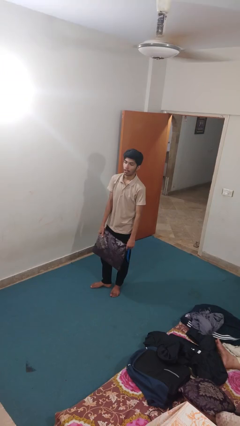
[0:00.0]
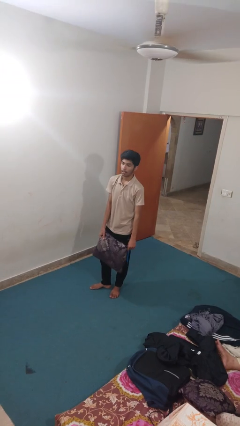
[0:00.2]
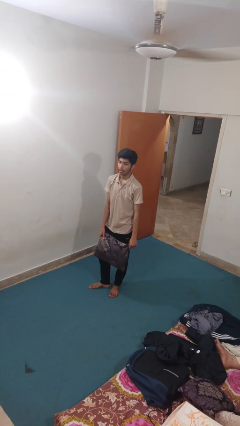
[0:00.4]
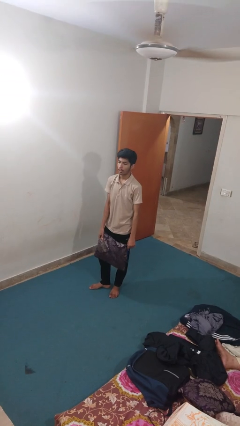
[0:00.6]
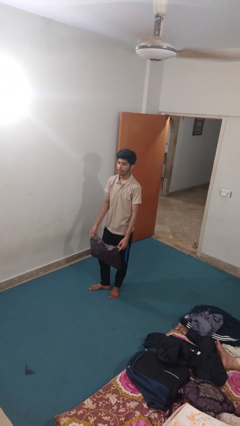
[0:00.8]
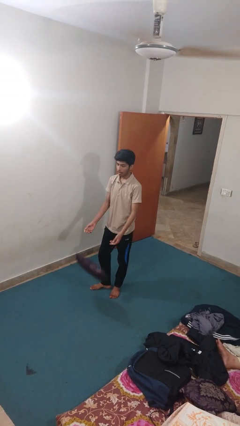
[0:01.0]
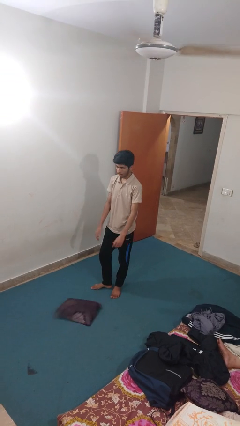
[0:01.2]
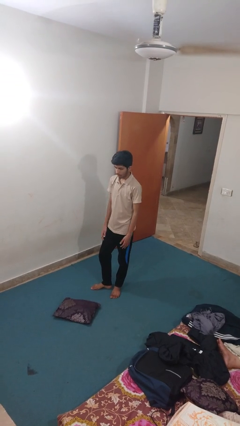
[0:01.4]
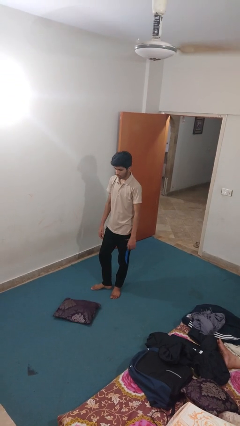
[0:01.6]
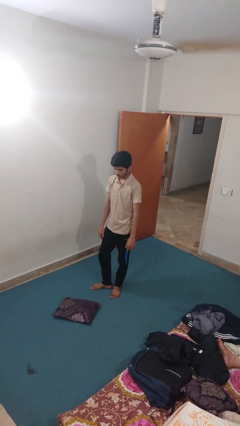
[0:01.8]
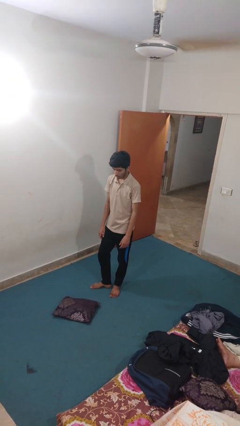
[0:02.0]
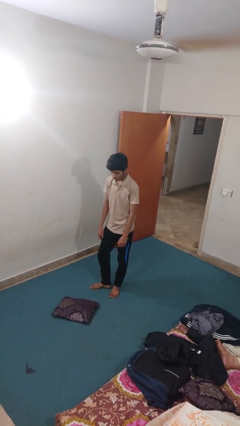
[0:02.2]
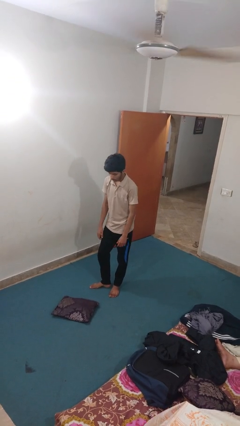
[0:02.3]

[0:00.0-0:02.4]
person drops object

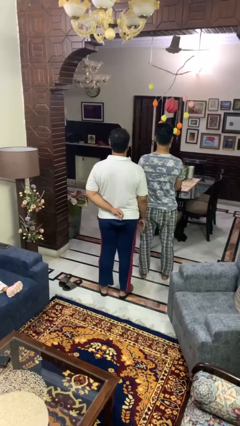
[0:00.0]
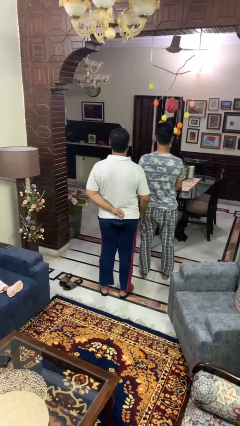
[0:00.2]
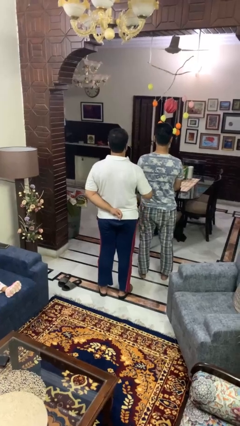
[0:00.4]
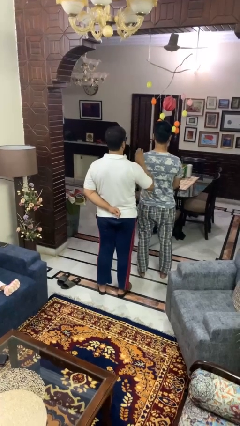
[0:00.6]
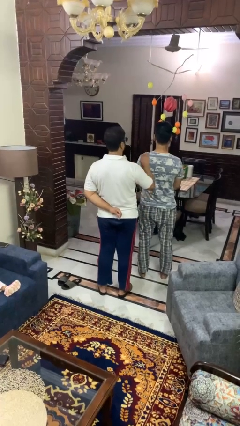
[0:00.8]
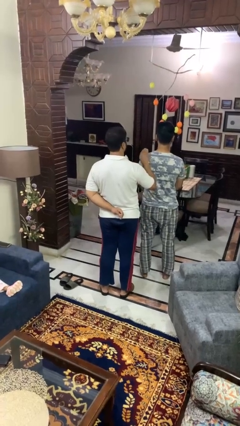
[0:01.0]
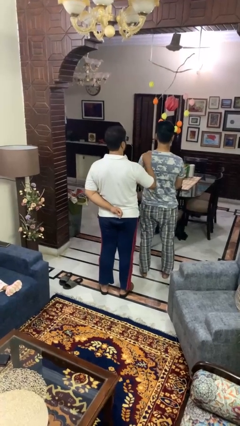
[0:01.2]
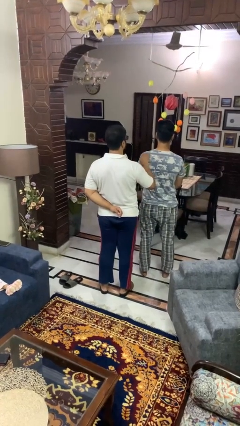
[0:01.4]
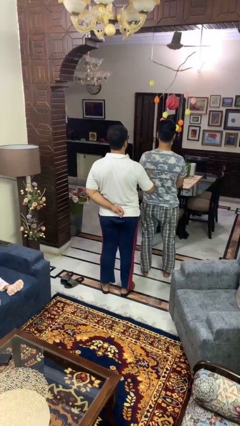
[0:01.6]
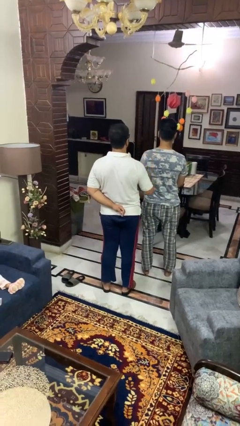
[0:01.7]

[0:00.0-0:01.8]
person pounds shoulders of person

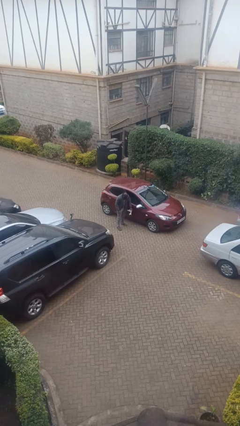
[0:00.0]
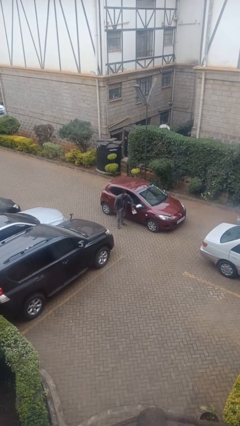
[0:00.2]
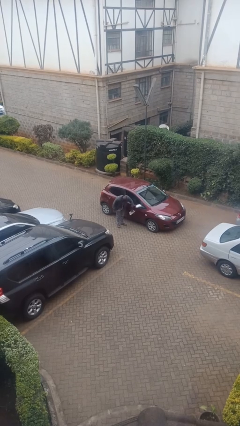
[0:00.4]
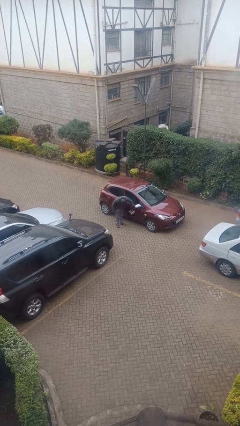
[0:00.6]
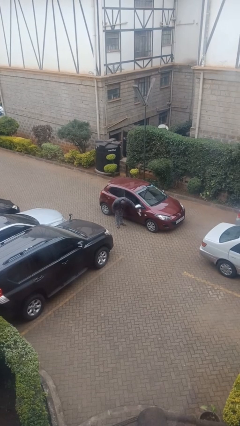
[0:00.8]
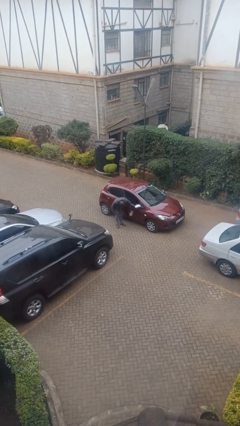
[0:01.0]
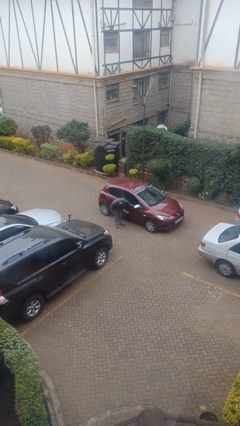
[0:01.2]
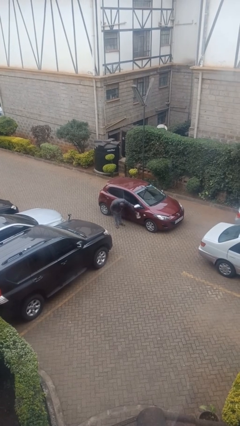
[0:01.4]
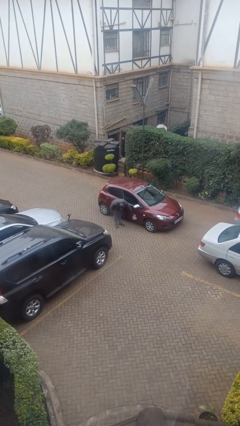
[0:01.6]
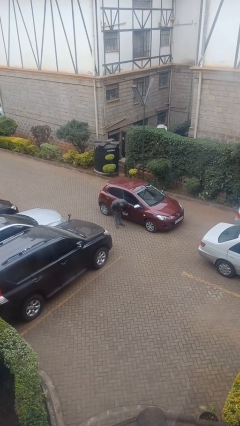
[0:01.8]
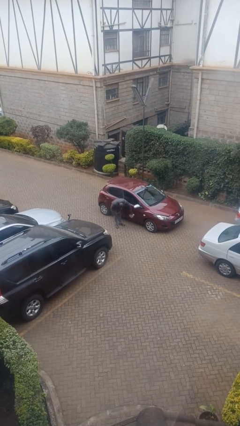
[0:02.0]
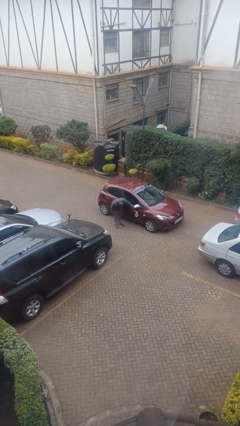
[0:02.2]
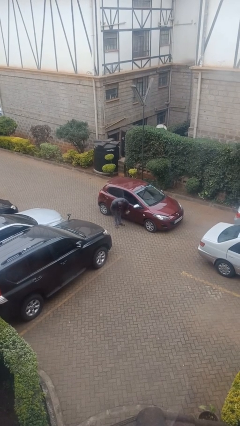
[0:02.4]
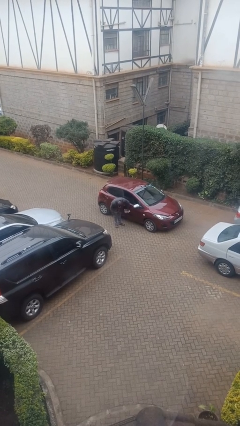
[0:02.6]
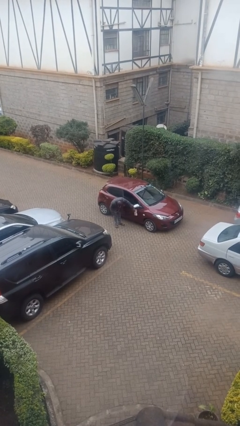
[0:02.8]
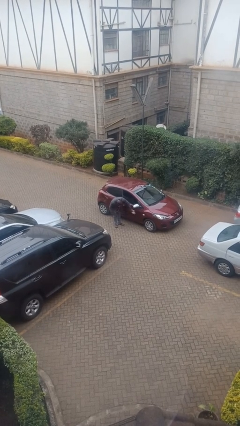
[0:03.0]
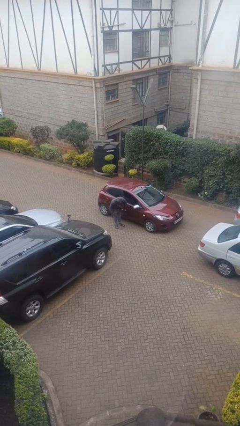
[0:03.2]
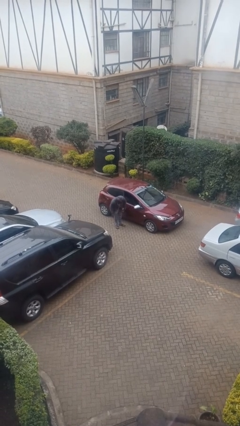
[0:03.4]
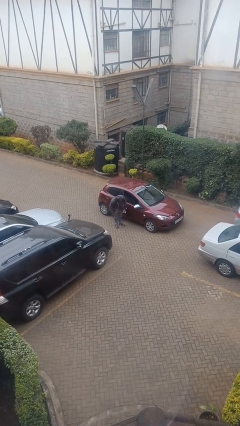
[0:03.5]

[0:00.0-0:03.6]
person polishes car with rag

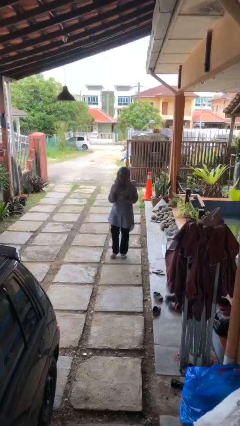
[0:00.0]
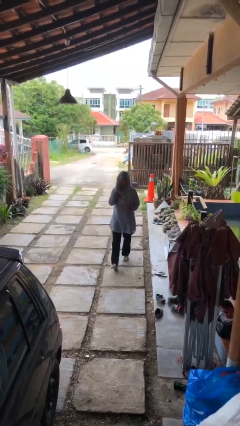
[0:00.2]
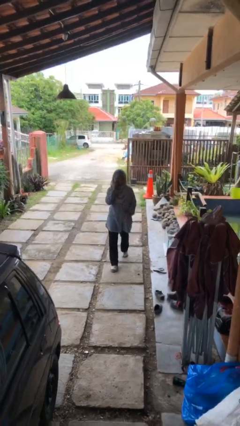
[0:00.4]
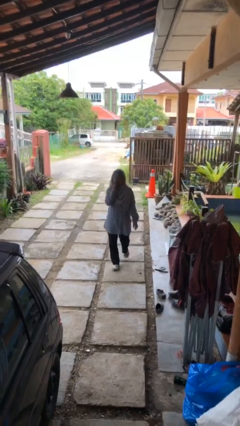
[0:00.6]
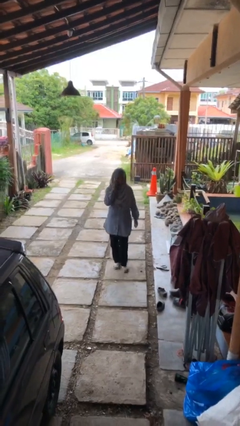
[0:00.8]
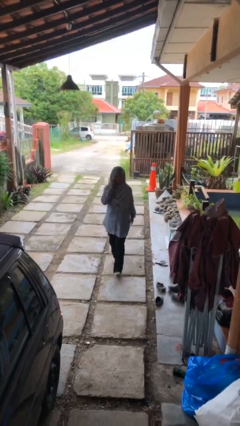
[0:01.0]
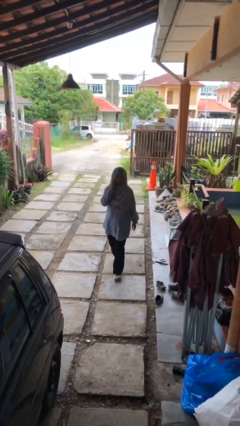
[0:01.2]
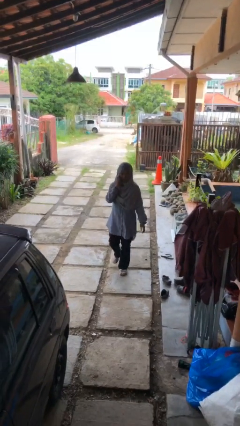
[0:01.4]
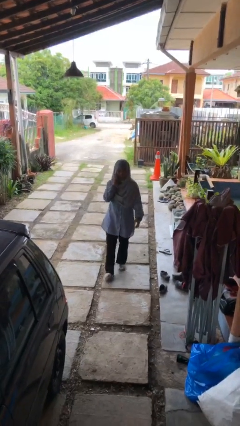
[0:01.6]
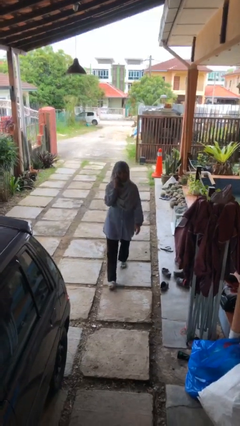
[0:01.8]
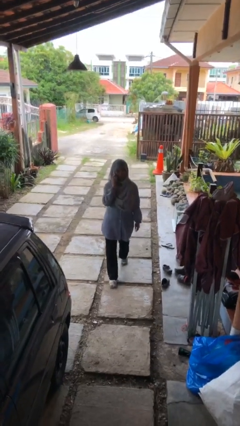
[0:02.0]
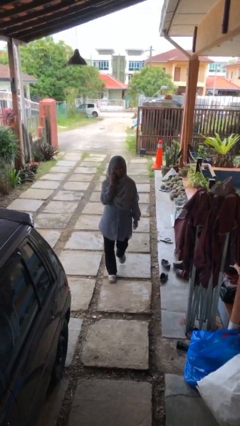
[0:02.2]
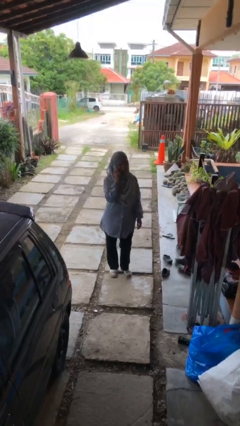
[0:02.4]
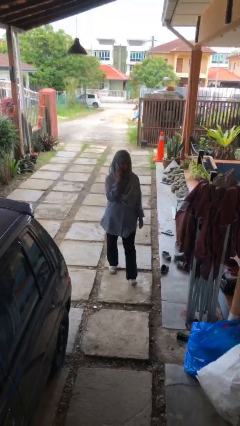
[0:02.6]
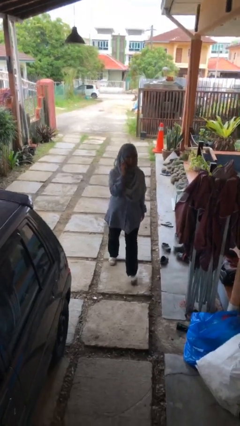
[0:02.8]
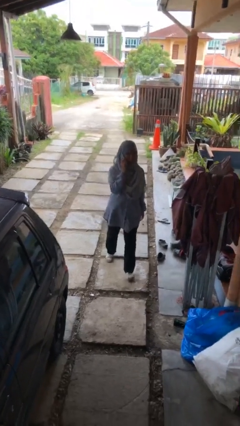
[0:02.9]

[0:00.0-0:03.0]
person talks on phone

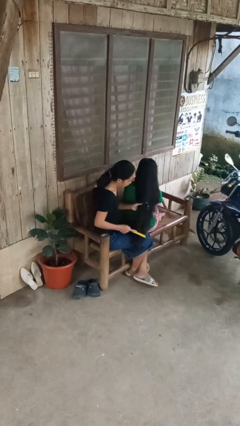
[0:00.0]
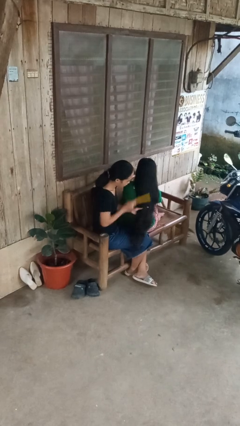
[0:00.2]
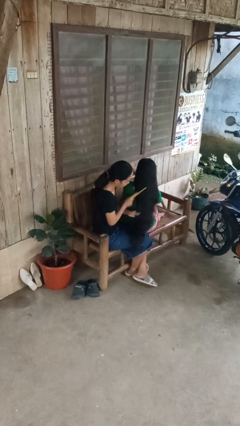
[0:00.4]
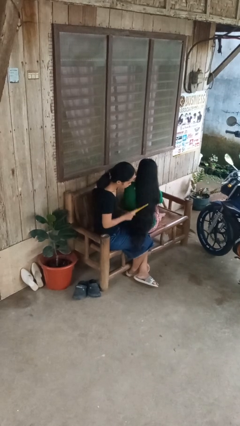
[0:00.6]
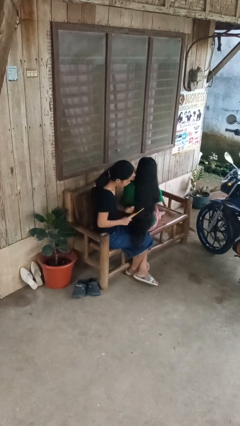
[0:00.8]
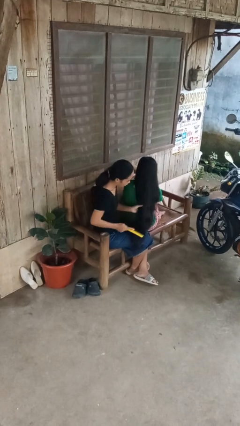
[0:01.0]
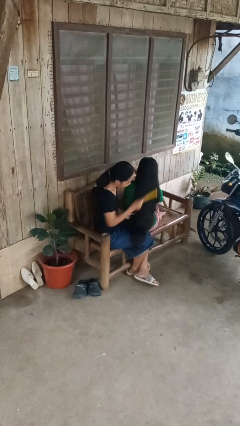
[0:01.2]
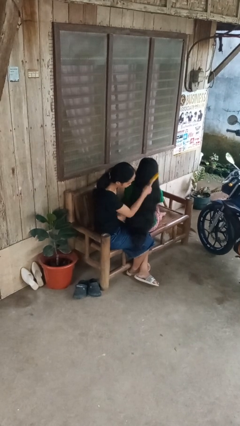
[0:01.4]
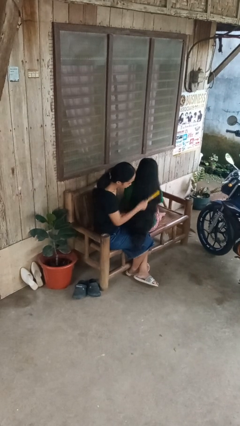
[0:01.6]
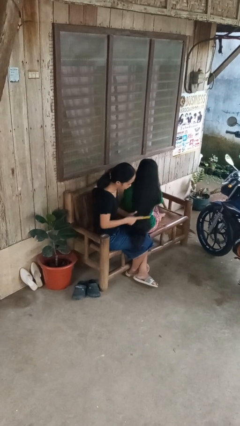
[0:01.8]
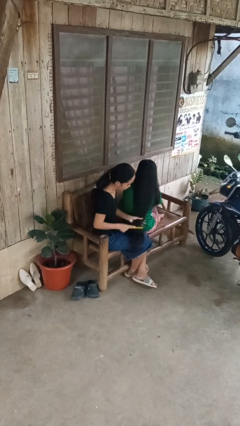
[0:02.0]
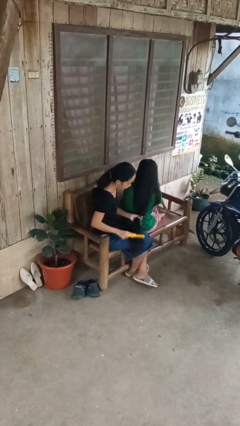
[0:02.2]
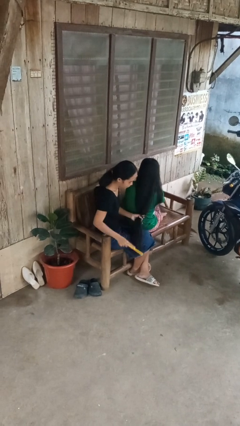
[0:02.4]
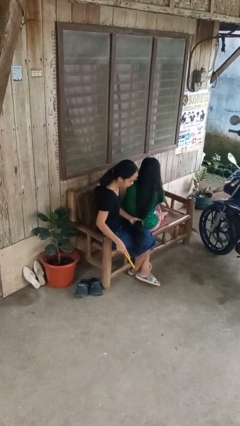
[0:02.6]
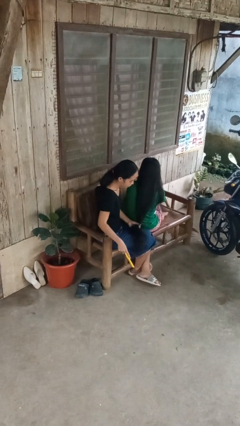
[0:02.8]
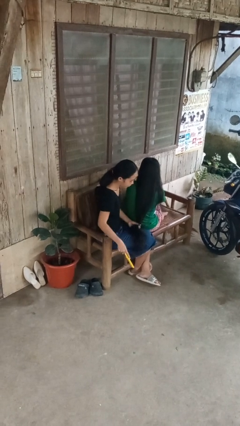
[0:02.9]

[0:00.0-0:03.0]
person brushes hair of person

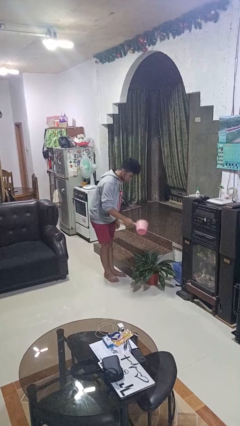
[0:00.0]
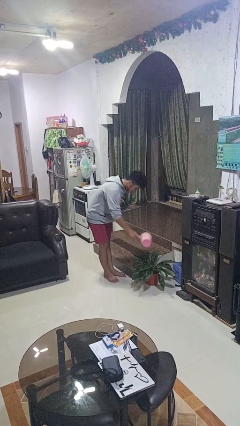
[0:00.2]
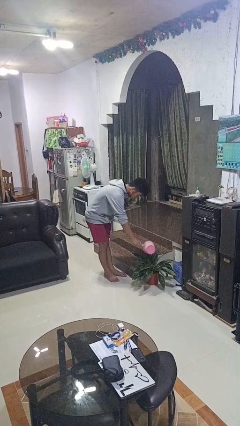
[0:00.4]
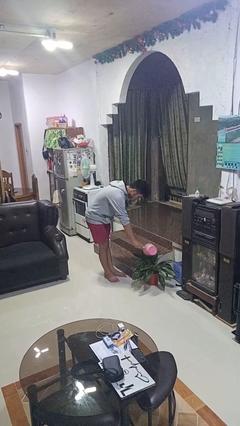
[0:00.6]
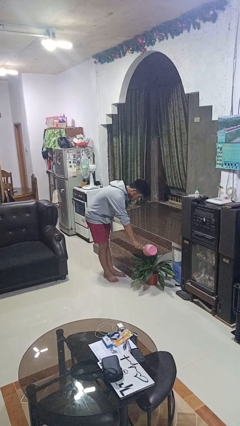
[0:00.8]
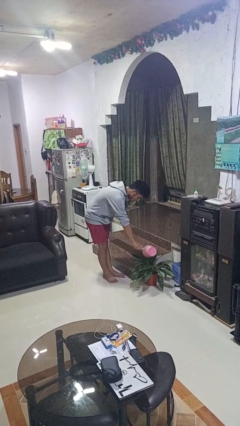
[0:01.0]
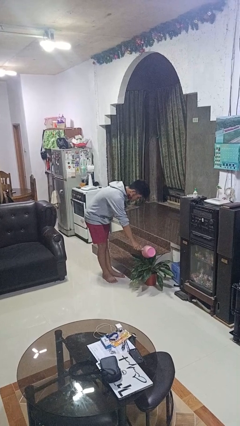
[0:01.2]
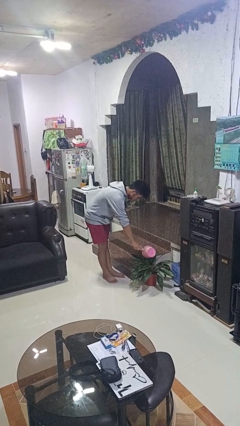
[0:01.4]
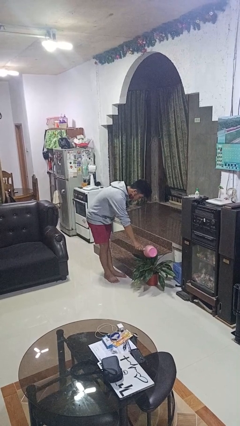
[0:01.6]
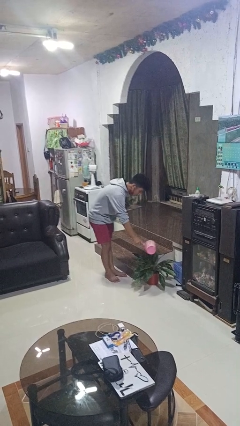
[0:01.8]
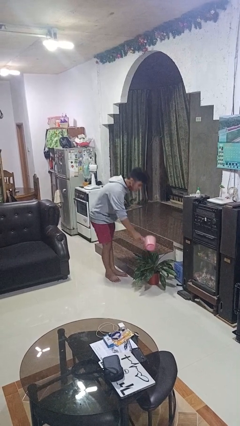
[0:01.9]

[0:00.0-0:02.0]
person waters houseplant

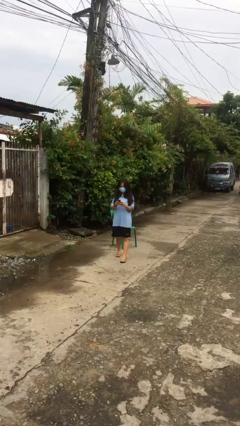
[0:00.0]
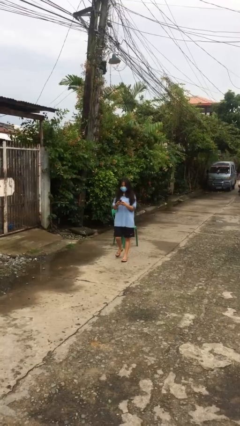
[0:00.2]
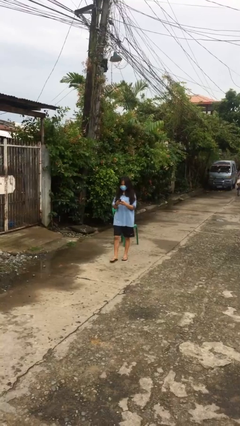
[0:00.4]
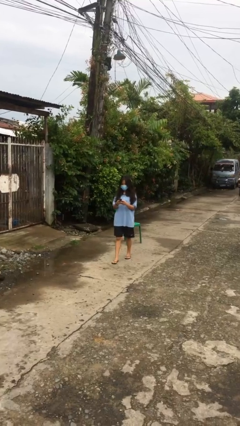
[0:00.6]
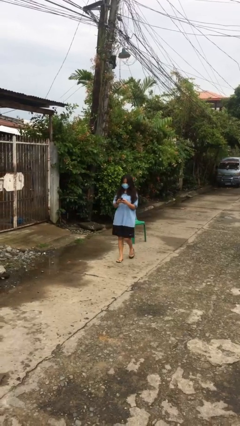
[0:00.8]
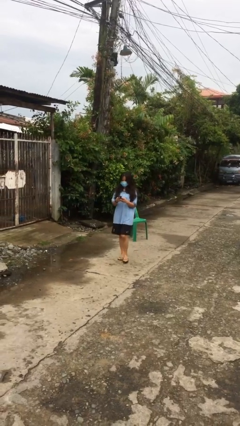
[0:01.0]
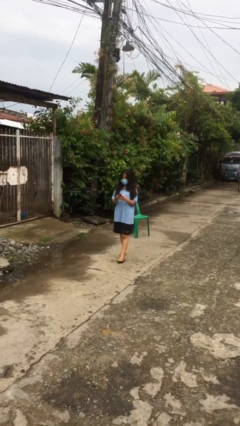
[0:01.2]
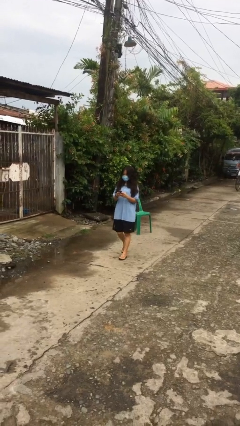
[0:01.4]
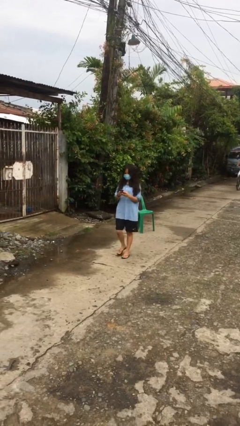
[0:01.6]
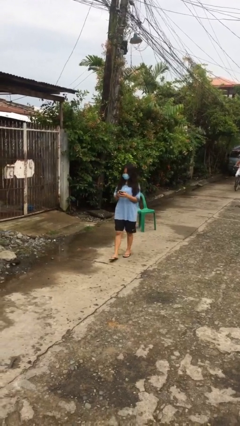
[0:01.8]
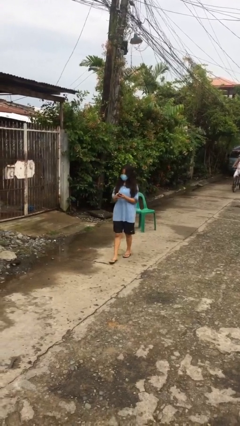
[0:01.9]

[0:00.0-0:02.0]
person texts on phone
